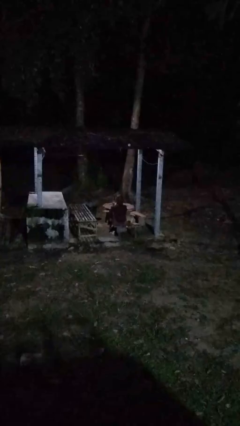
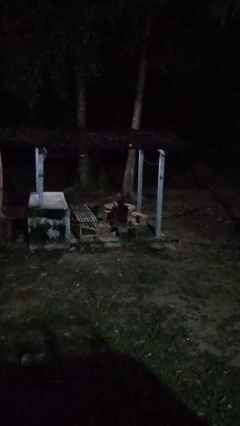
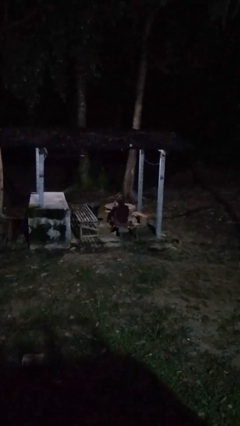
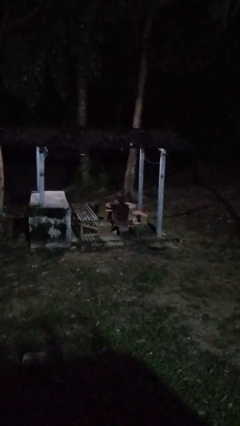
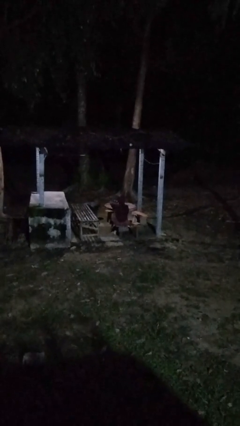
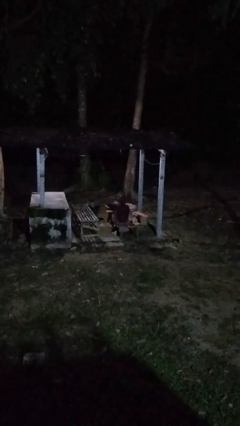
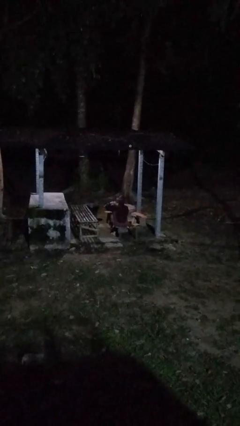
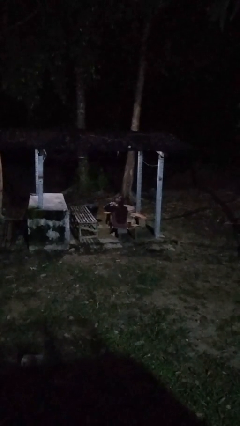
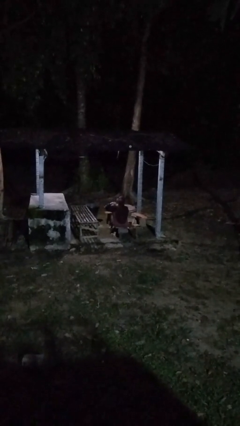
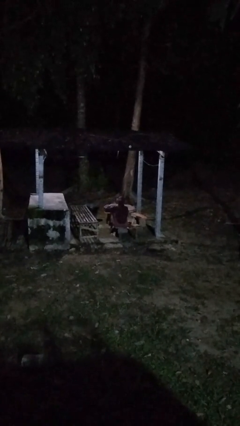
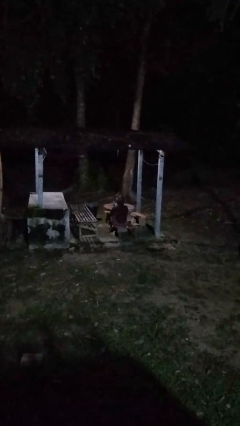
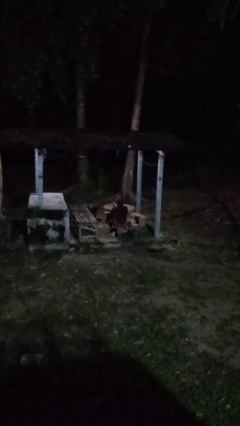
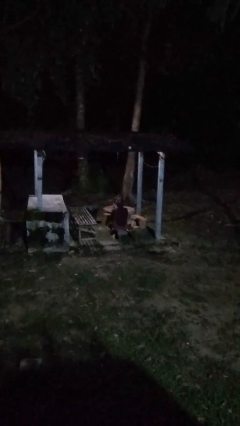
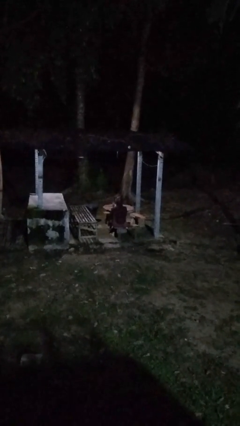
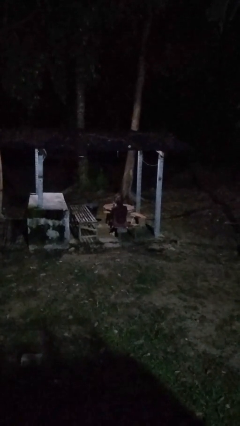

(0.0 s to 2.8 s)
person gestures cut

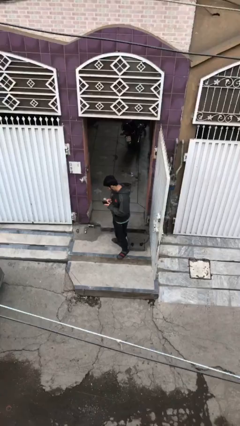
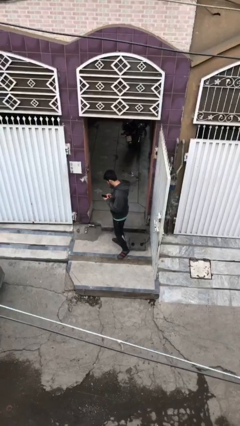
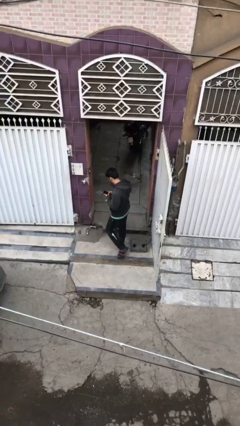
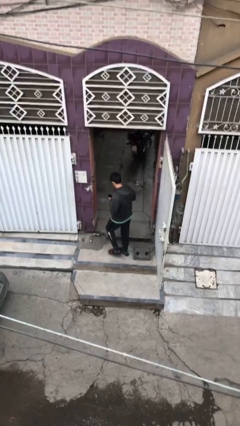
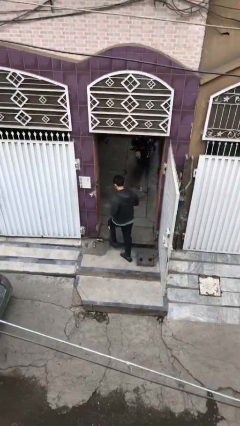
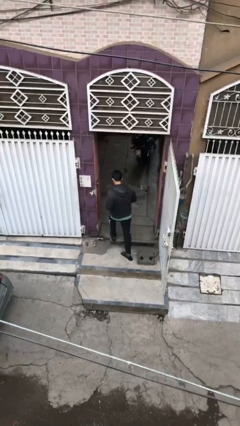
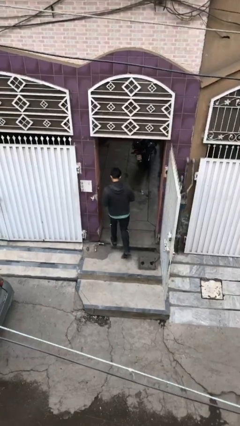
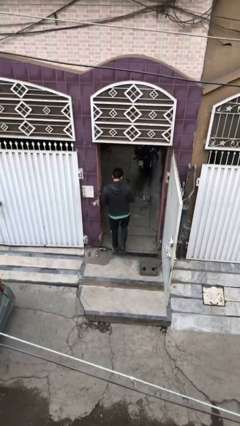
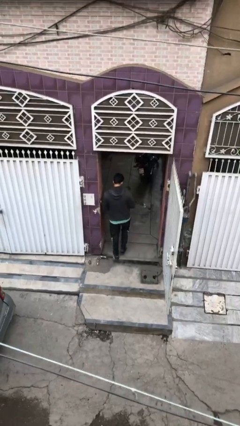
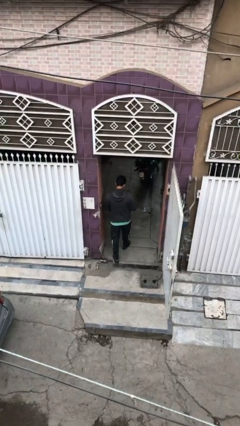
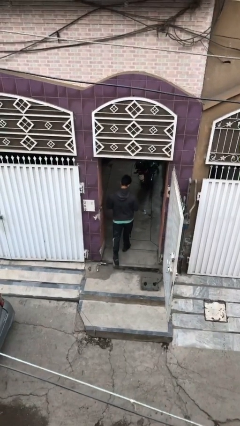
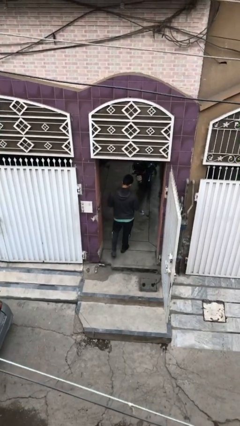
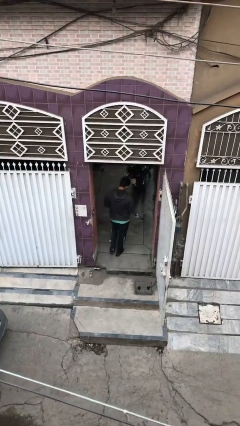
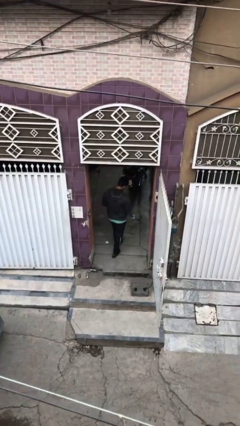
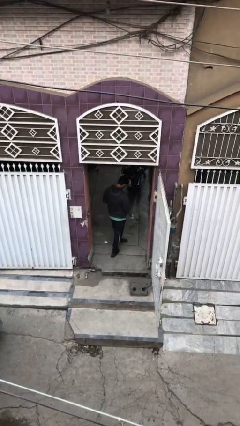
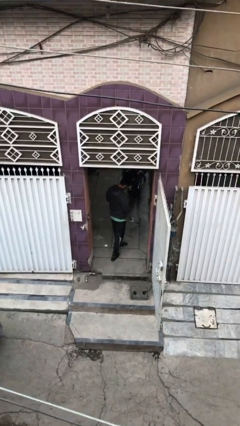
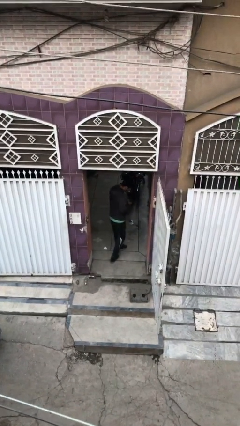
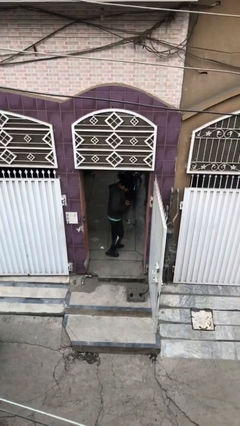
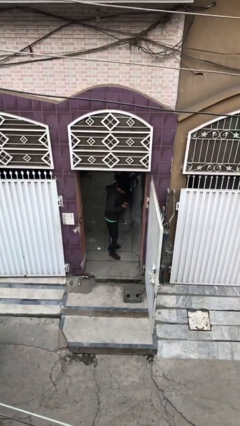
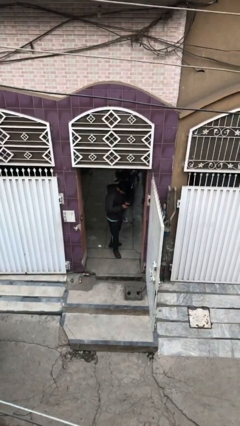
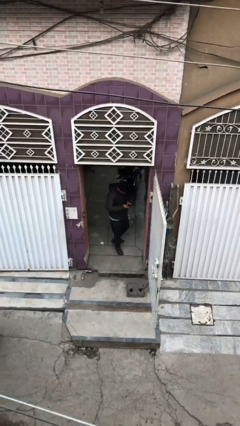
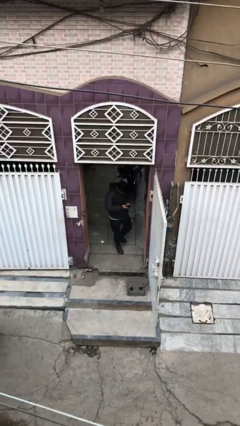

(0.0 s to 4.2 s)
person exits scene through structure

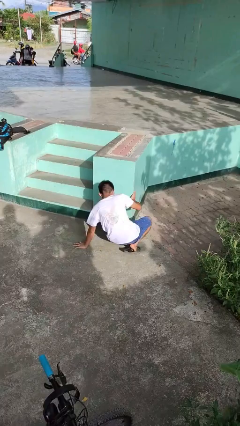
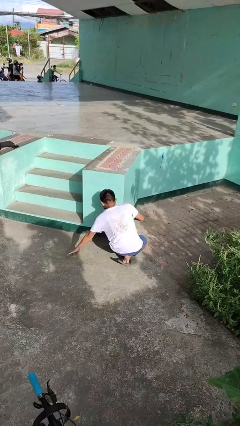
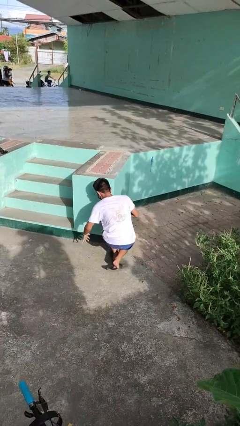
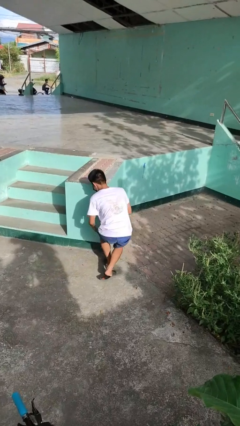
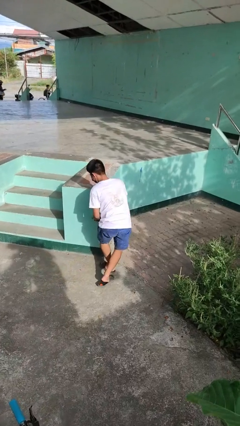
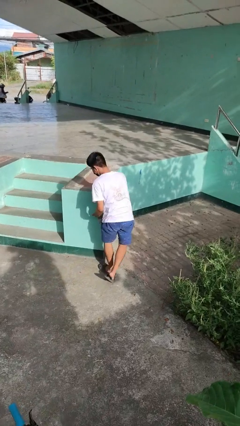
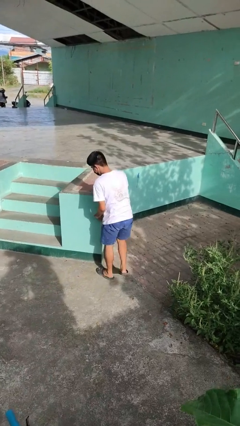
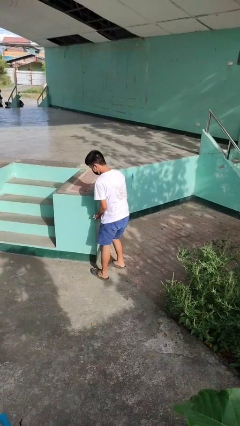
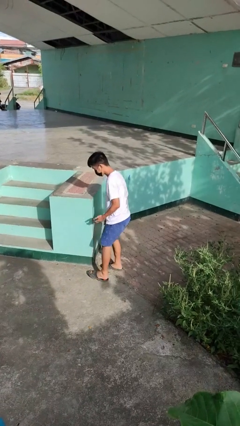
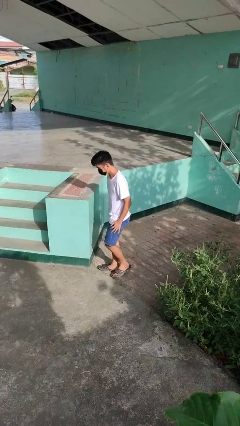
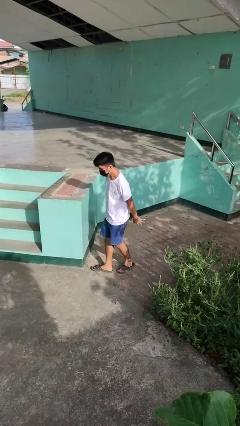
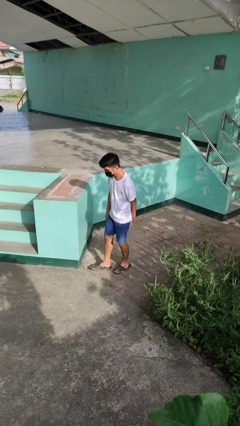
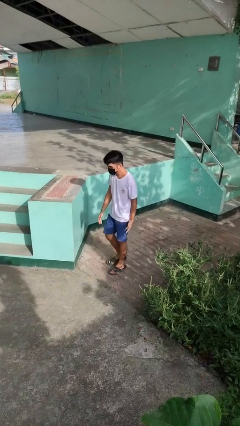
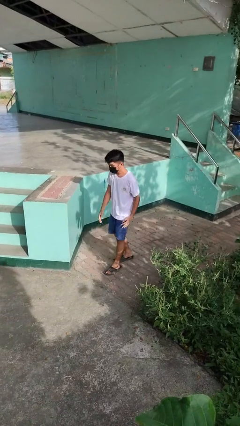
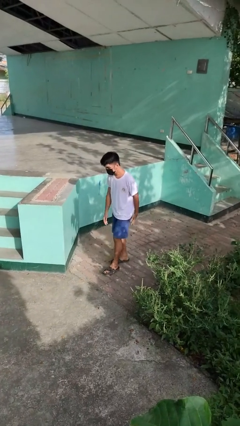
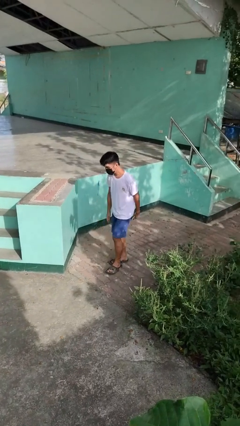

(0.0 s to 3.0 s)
person stands up from floor

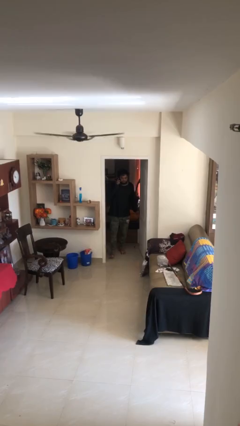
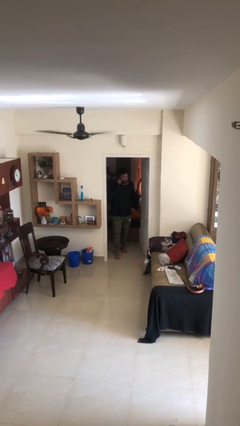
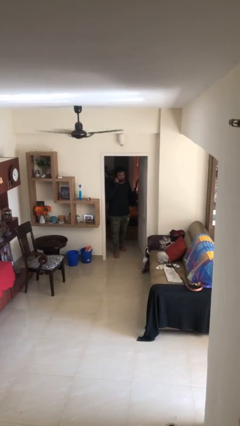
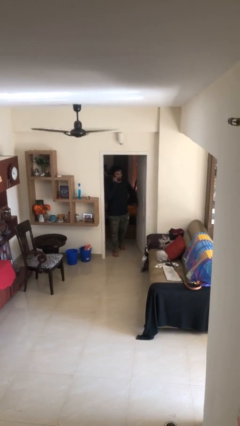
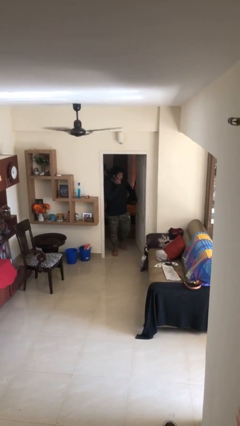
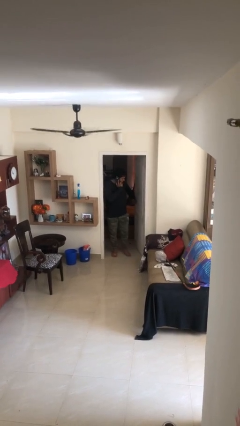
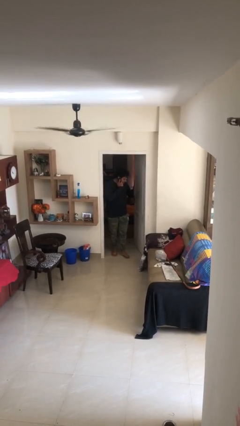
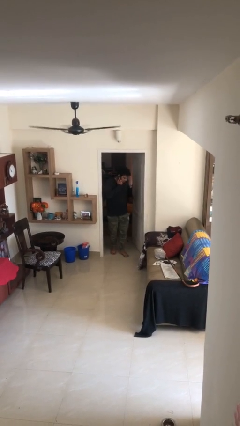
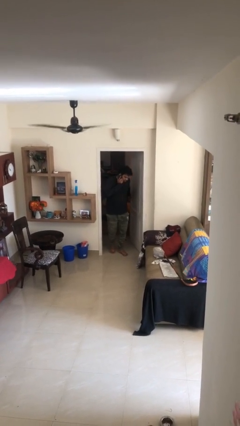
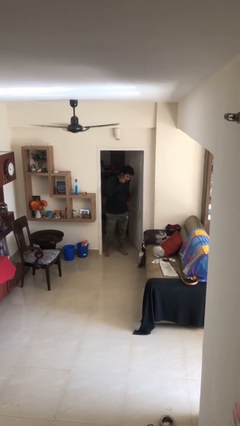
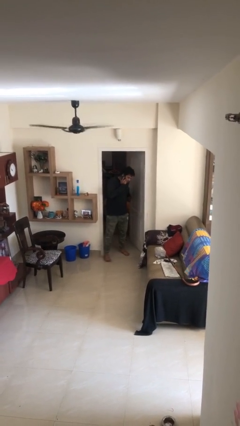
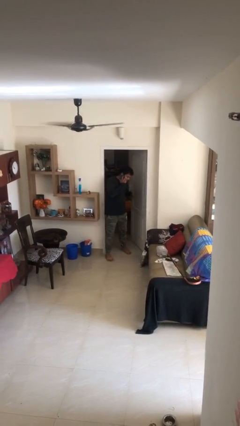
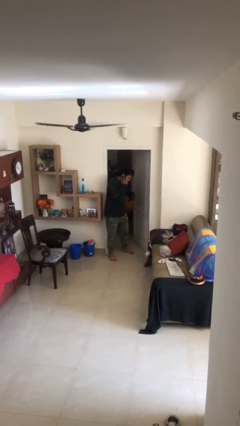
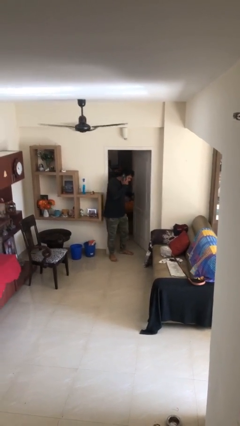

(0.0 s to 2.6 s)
person enters scene through structure

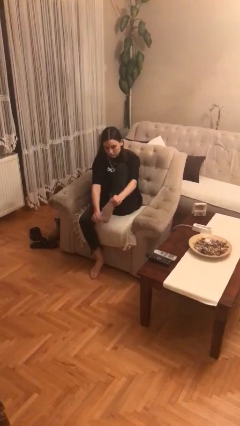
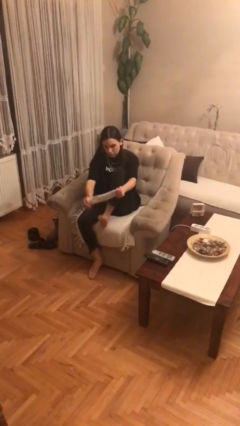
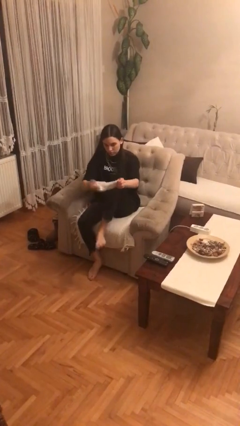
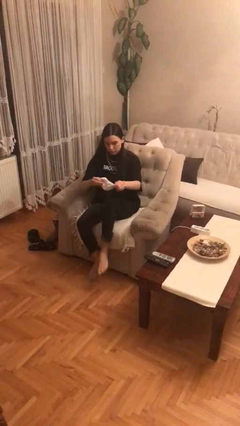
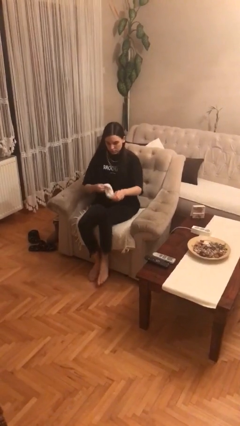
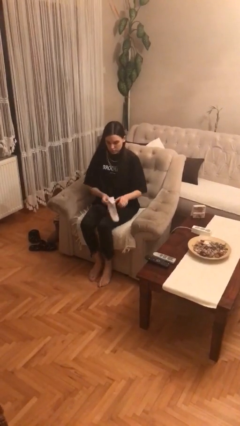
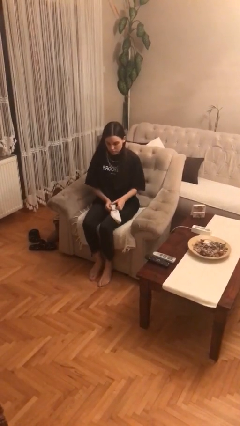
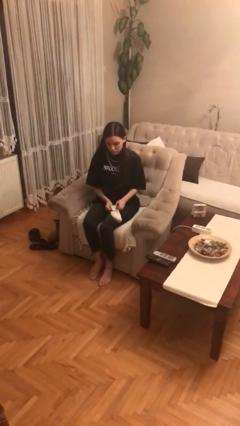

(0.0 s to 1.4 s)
person takes off socks

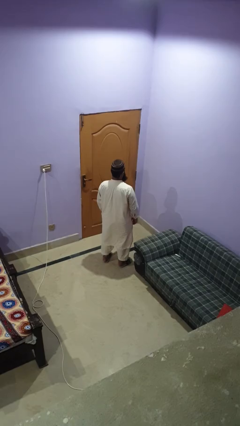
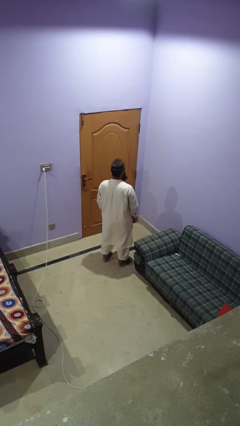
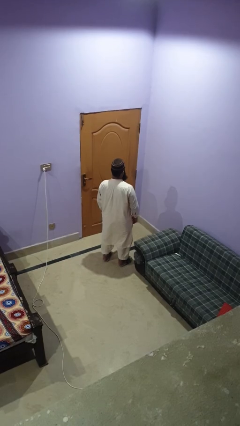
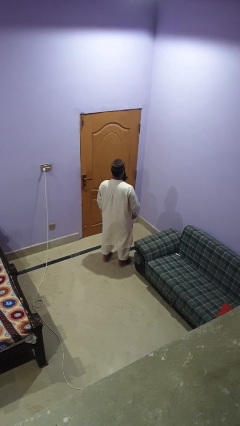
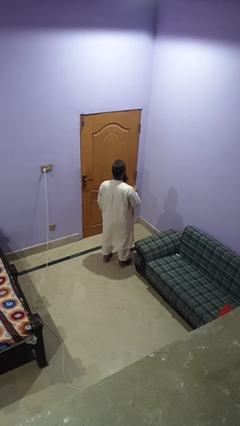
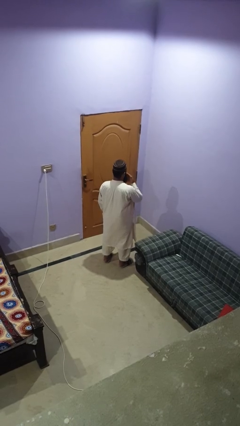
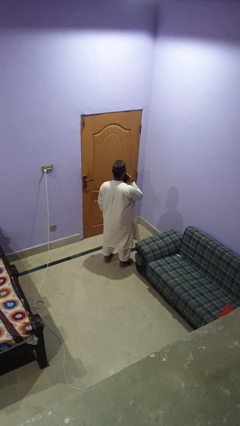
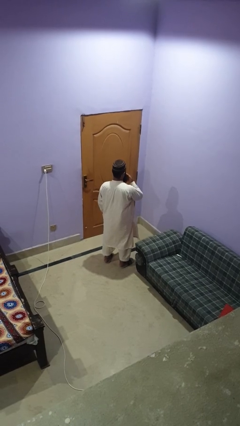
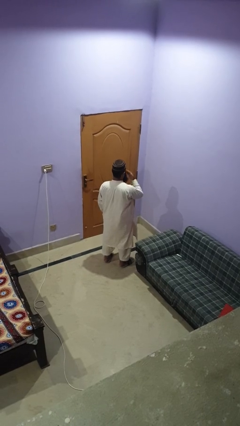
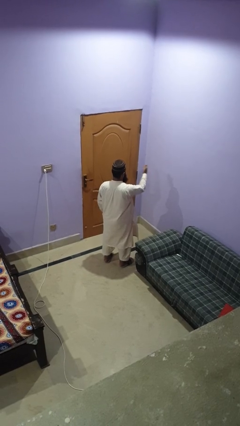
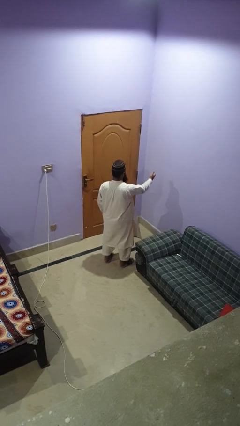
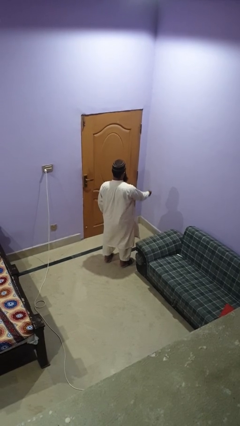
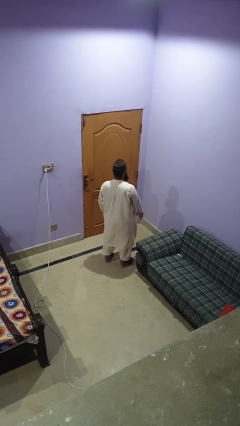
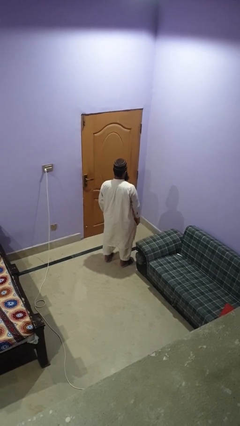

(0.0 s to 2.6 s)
person gestures blow kiss

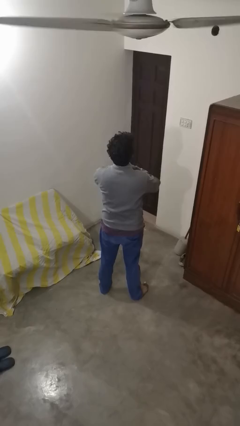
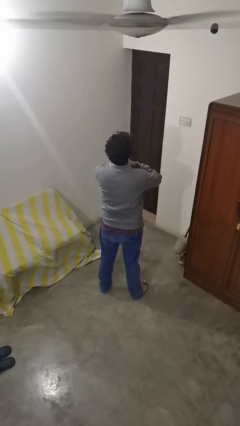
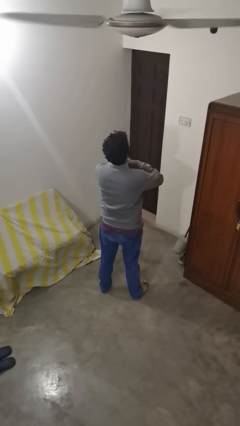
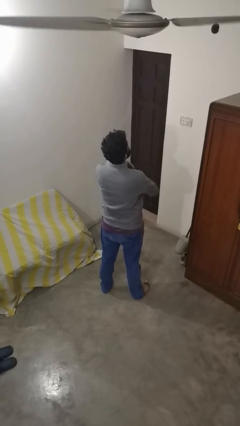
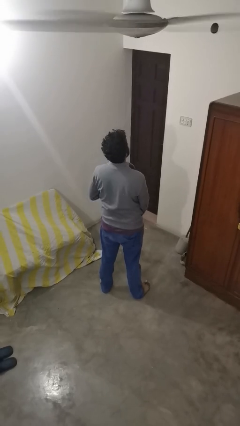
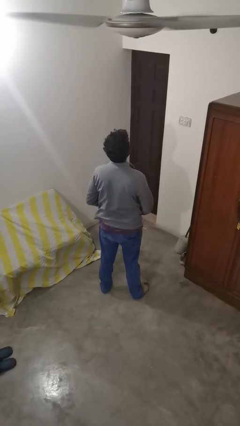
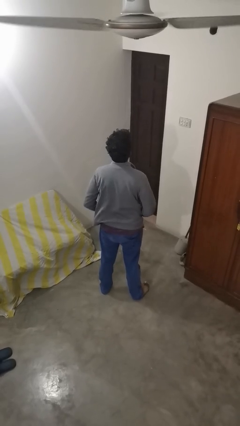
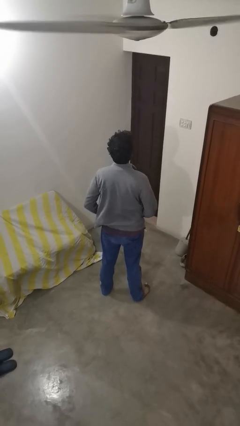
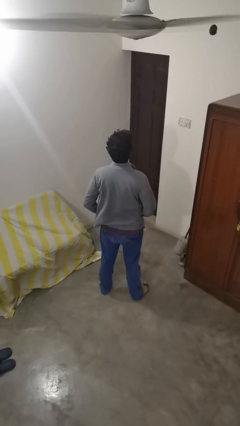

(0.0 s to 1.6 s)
person unzips jacket
